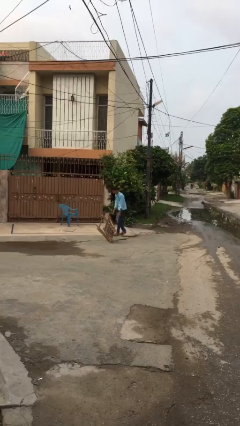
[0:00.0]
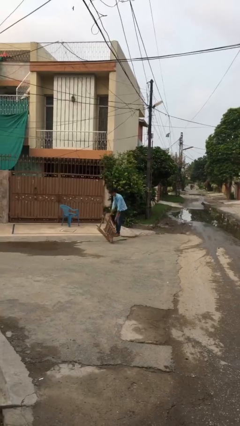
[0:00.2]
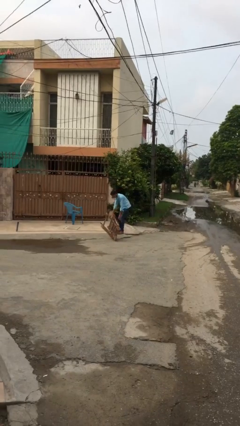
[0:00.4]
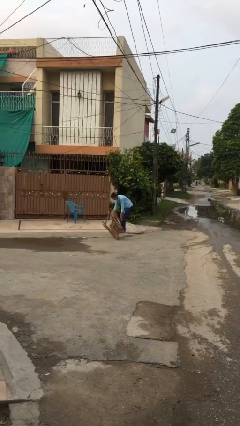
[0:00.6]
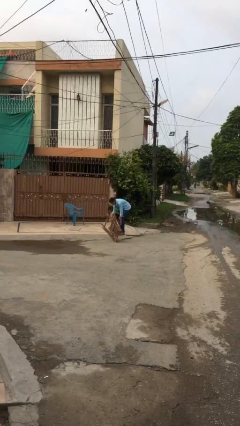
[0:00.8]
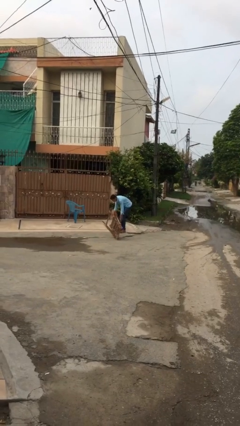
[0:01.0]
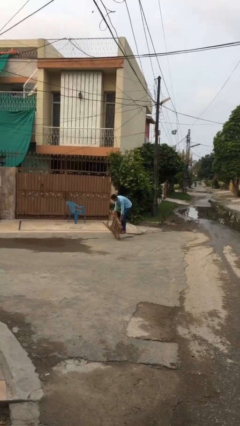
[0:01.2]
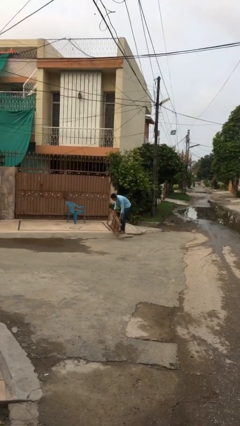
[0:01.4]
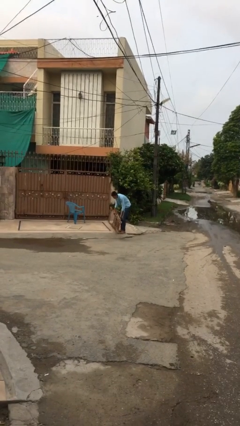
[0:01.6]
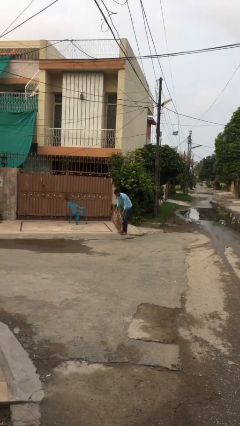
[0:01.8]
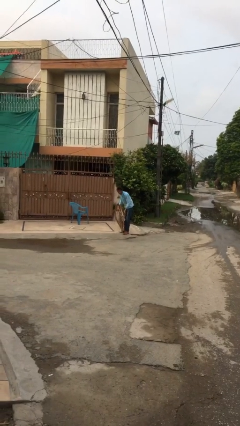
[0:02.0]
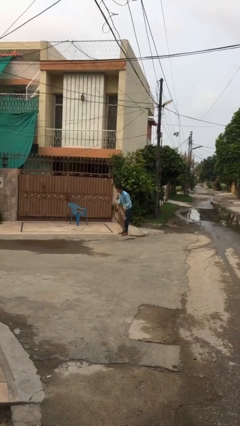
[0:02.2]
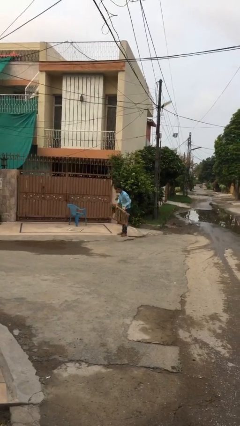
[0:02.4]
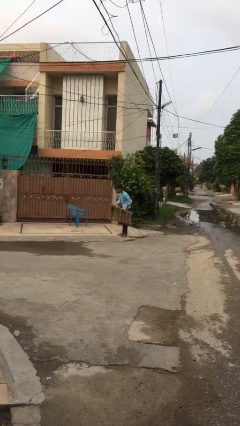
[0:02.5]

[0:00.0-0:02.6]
person picks up object from floor

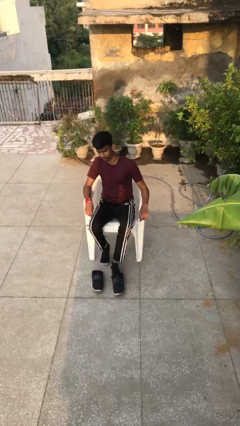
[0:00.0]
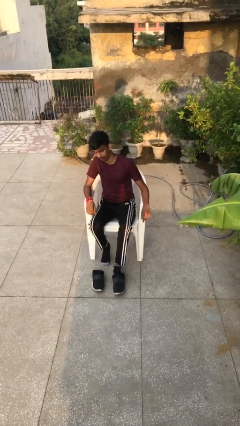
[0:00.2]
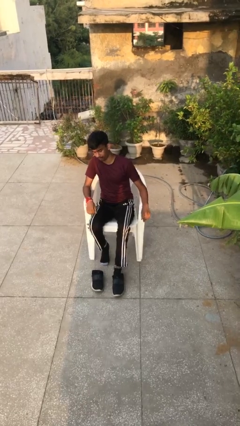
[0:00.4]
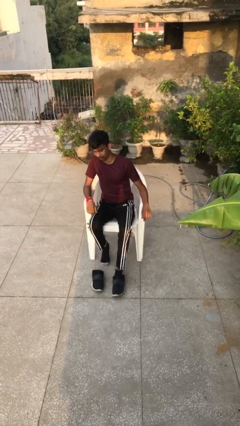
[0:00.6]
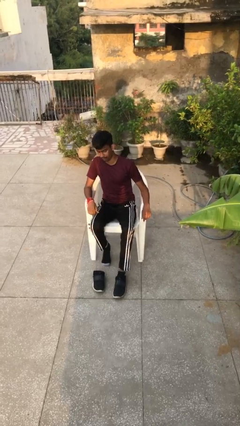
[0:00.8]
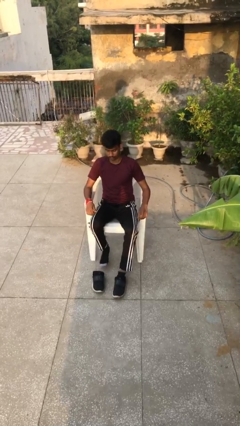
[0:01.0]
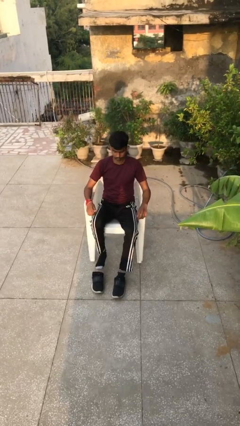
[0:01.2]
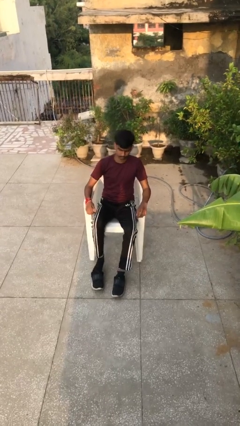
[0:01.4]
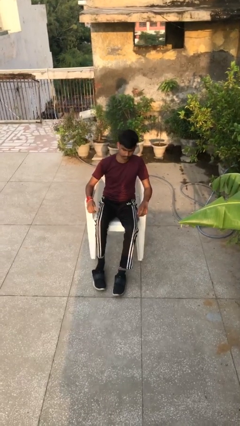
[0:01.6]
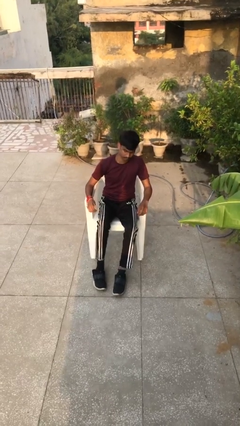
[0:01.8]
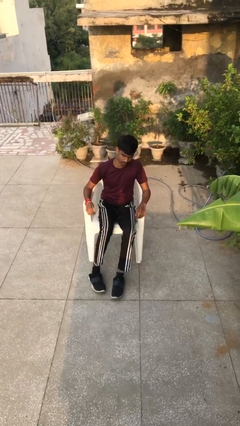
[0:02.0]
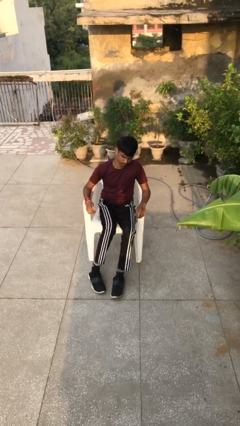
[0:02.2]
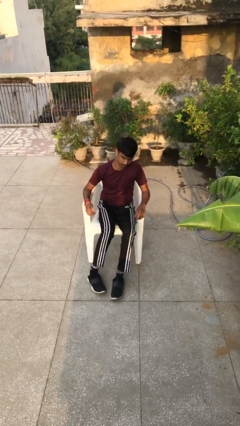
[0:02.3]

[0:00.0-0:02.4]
person puts on shoes

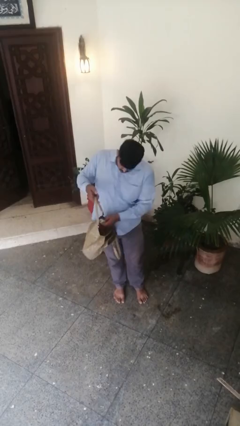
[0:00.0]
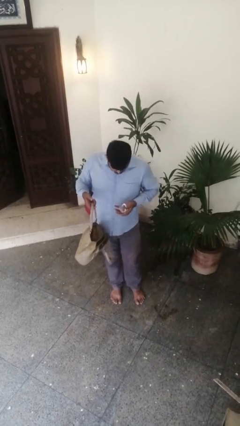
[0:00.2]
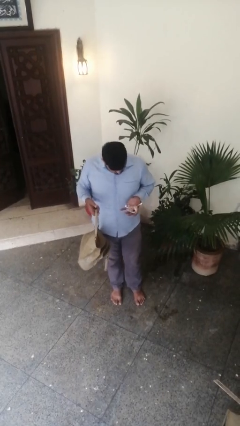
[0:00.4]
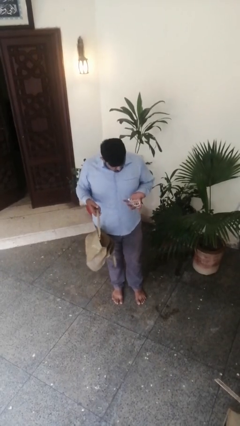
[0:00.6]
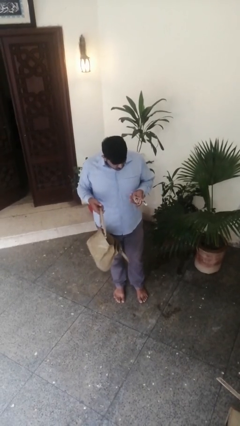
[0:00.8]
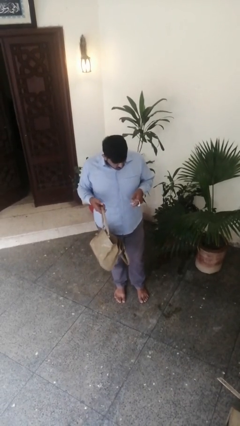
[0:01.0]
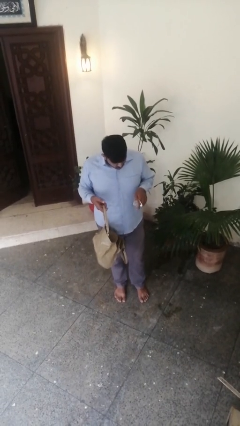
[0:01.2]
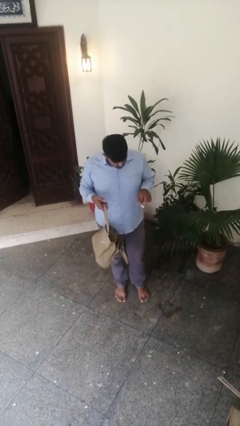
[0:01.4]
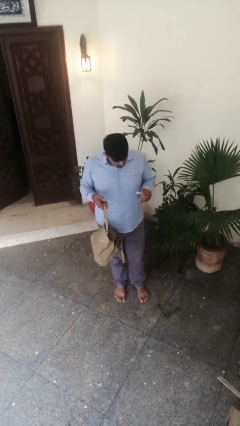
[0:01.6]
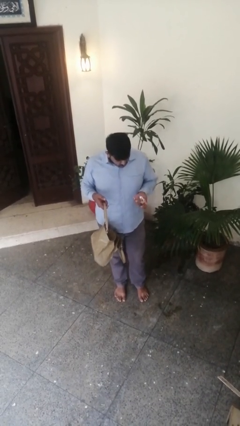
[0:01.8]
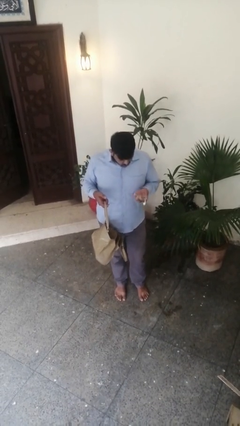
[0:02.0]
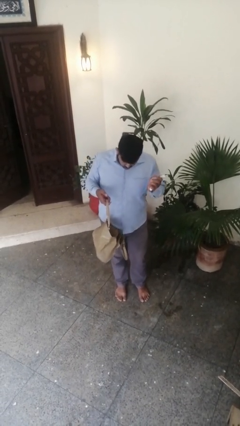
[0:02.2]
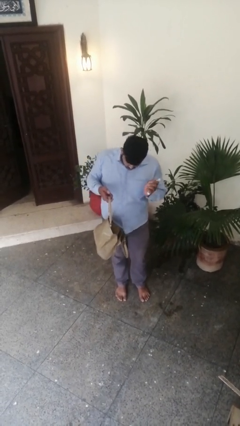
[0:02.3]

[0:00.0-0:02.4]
person takes object from purse

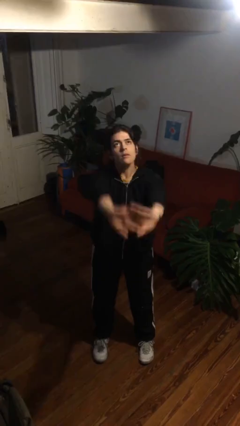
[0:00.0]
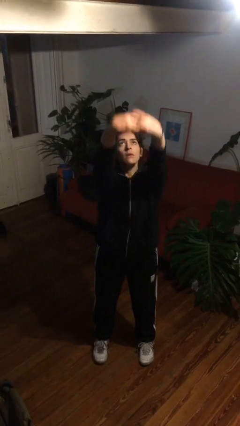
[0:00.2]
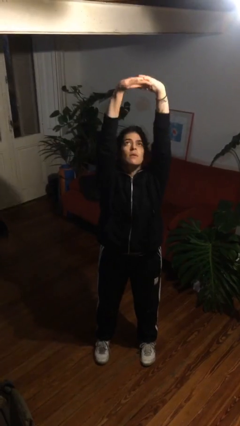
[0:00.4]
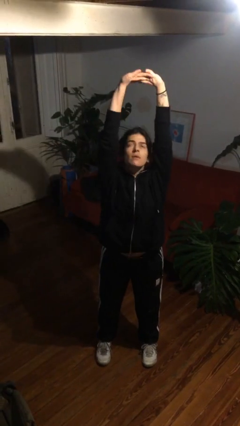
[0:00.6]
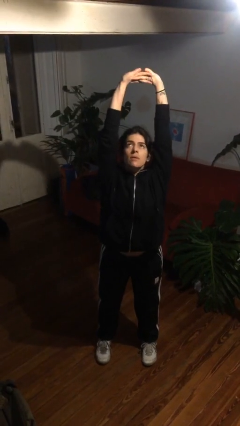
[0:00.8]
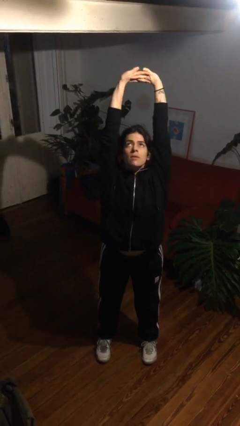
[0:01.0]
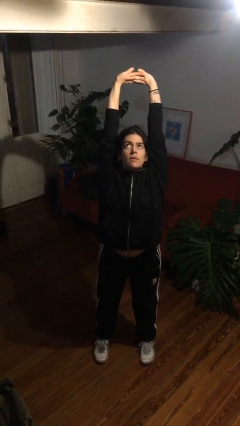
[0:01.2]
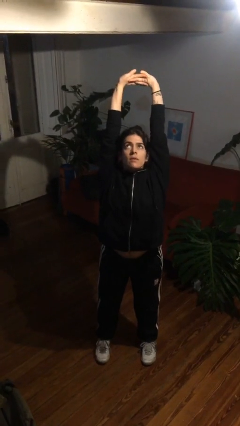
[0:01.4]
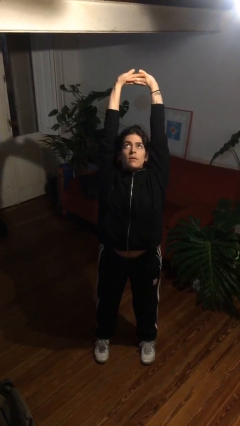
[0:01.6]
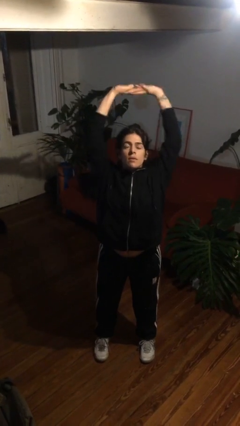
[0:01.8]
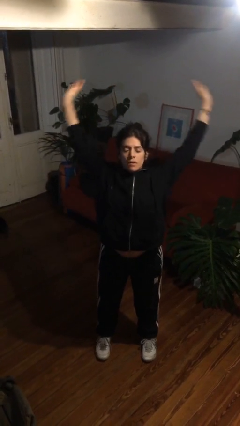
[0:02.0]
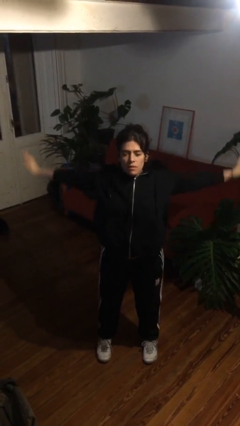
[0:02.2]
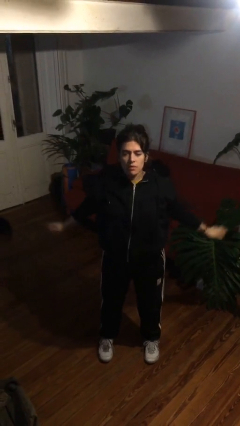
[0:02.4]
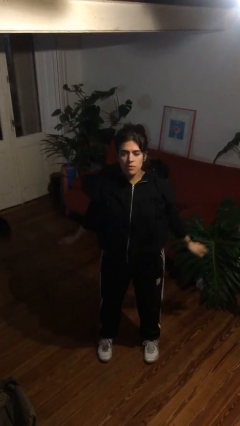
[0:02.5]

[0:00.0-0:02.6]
person stretches arms over head

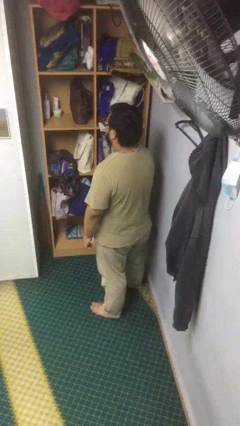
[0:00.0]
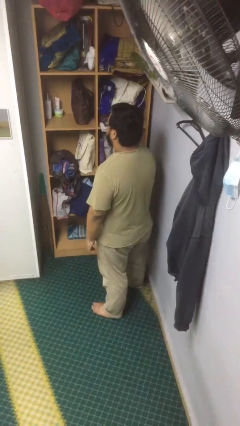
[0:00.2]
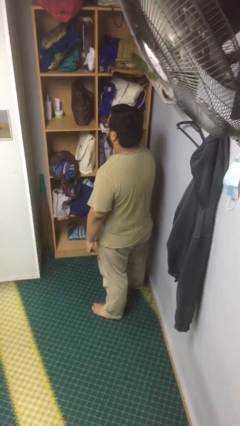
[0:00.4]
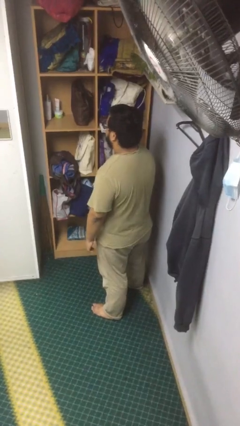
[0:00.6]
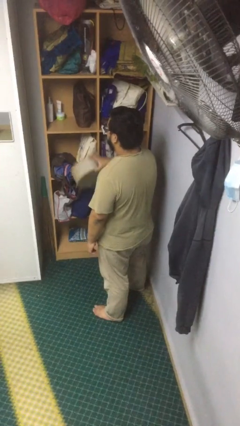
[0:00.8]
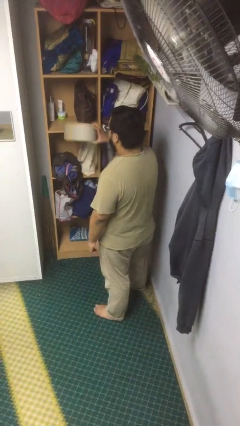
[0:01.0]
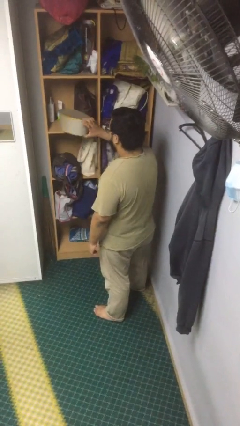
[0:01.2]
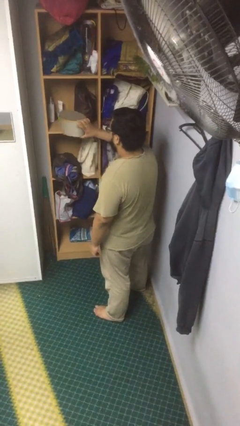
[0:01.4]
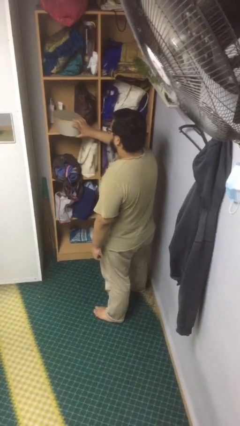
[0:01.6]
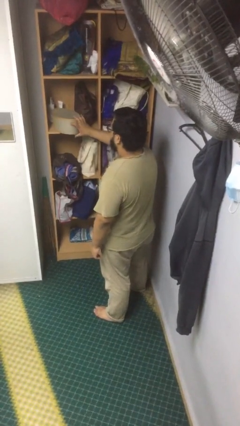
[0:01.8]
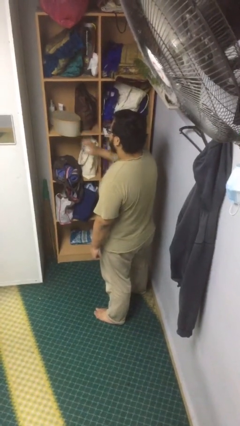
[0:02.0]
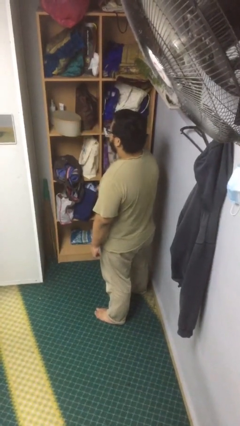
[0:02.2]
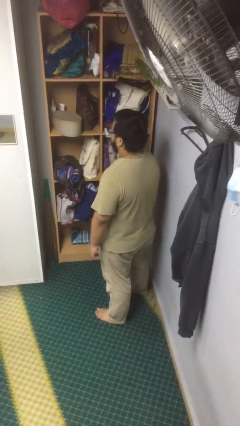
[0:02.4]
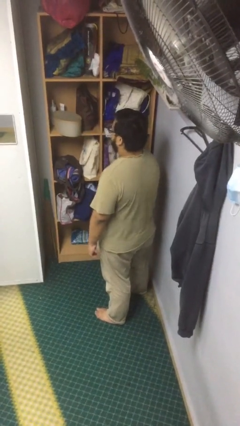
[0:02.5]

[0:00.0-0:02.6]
person puts down object into cabinet

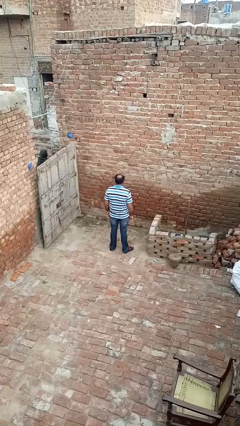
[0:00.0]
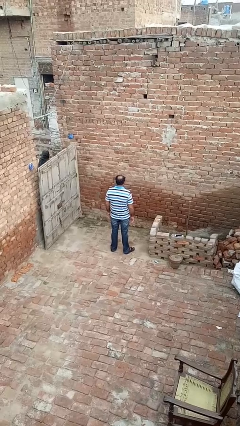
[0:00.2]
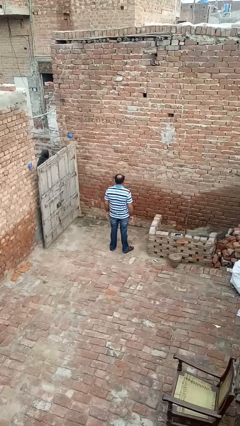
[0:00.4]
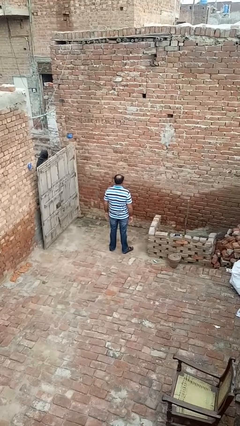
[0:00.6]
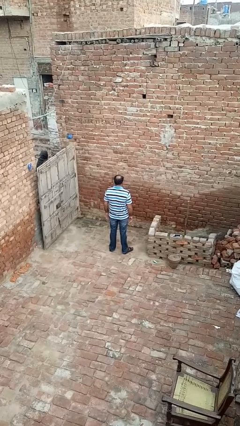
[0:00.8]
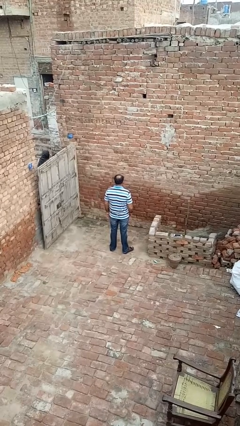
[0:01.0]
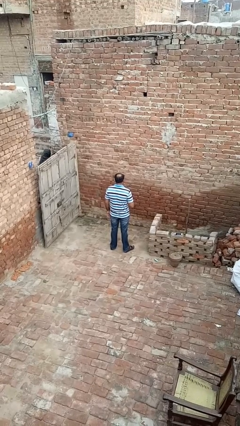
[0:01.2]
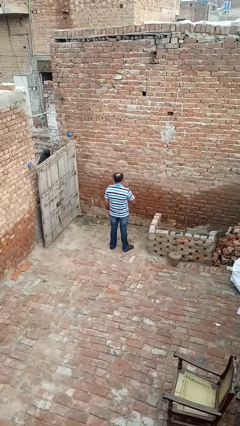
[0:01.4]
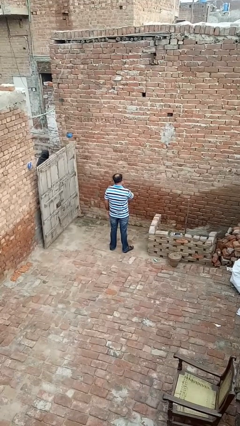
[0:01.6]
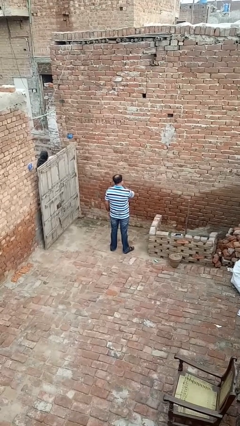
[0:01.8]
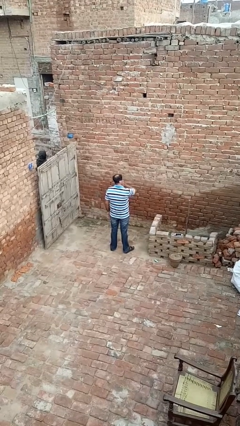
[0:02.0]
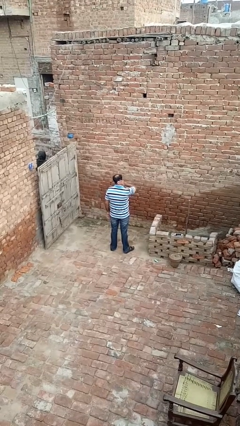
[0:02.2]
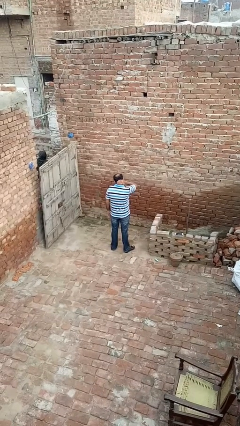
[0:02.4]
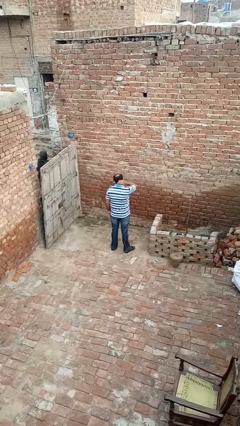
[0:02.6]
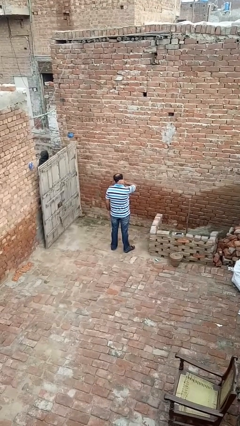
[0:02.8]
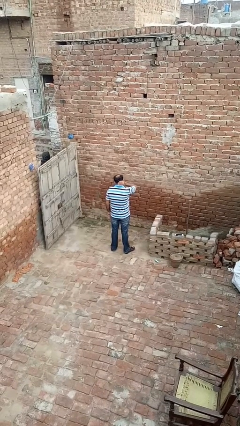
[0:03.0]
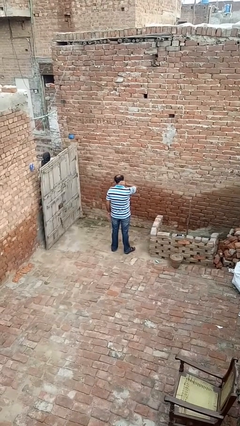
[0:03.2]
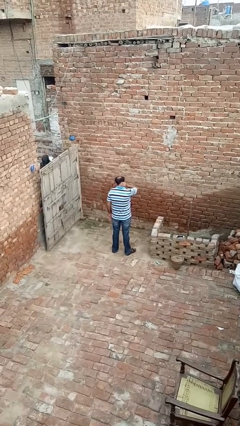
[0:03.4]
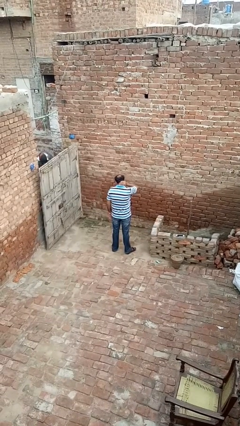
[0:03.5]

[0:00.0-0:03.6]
person rubs neck

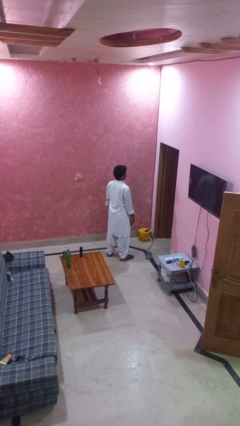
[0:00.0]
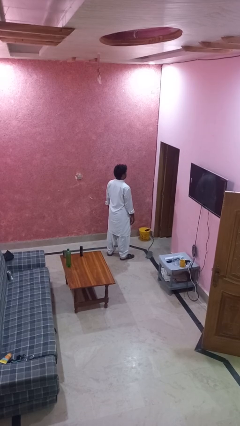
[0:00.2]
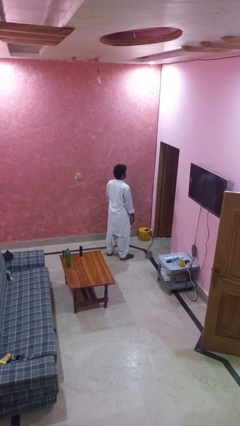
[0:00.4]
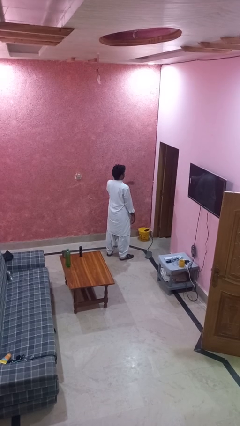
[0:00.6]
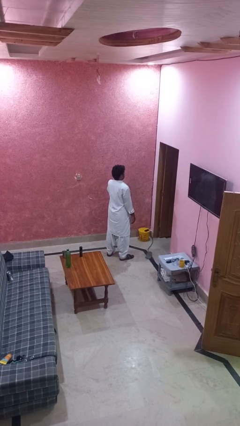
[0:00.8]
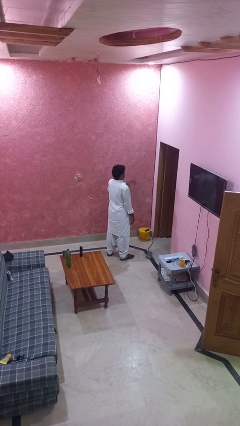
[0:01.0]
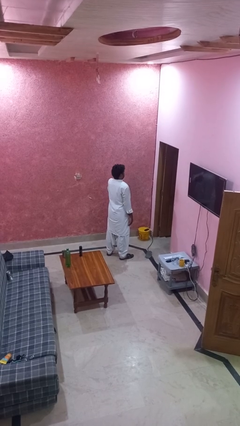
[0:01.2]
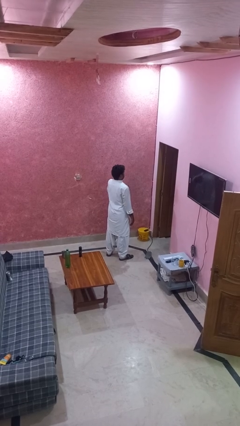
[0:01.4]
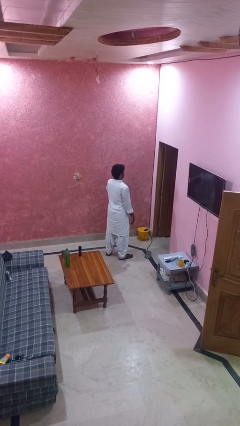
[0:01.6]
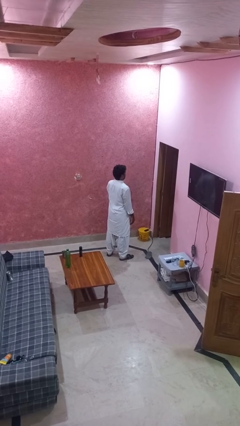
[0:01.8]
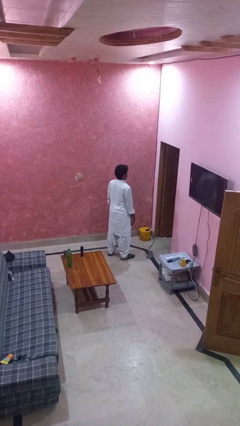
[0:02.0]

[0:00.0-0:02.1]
person drums on chest
